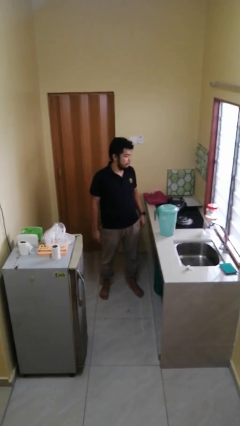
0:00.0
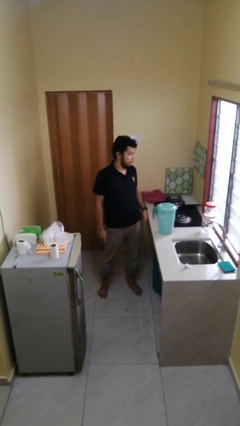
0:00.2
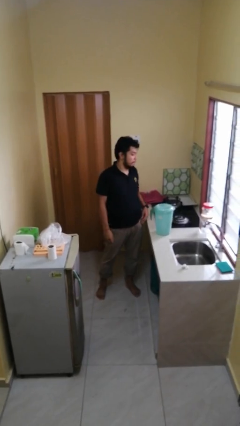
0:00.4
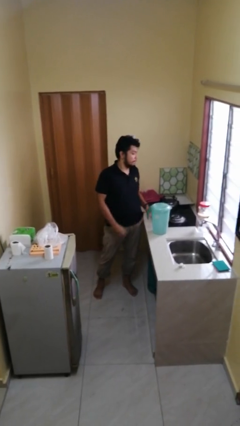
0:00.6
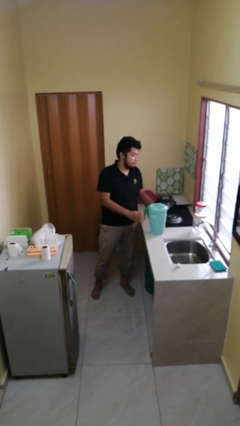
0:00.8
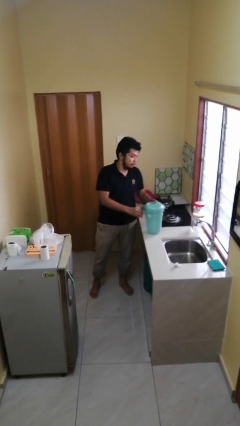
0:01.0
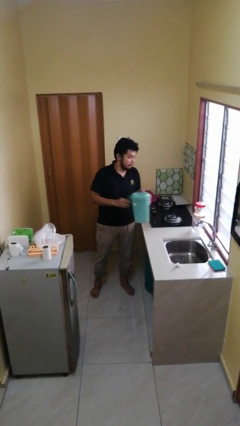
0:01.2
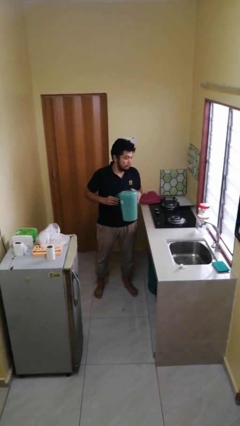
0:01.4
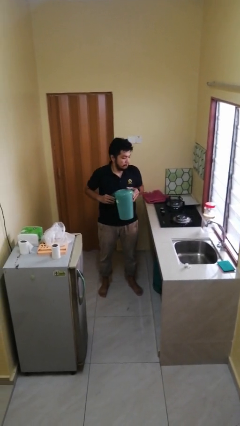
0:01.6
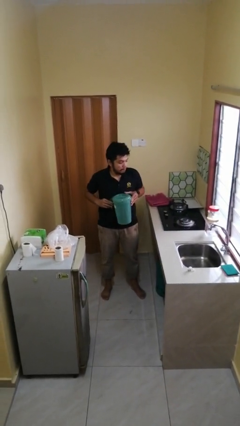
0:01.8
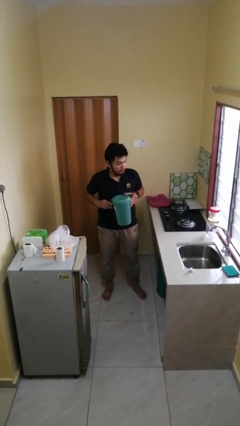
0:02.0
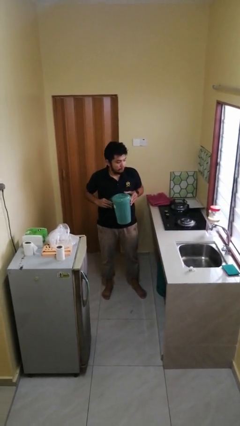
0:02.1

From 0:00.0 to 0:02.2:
person picks up object from countertop

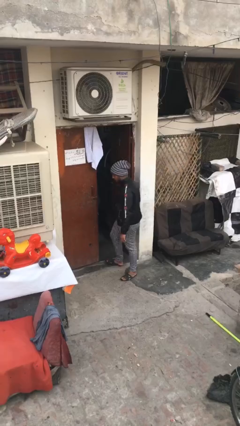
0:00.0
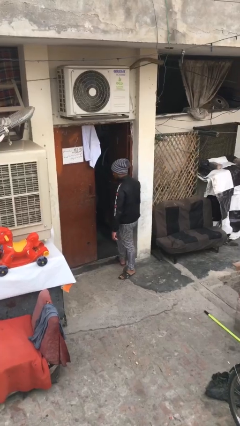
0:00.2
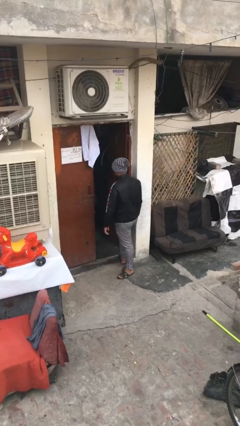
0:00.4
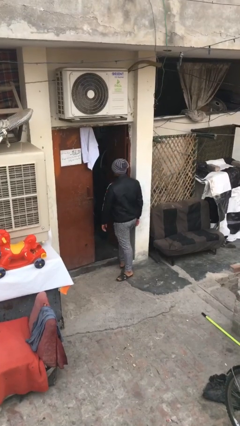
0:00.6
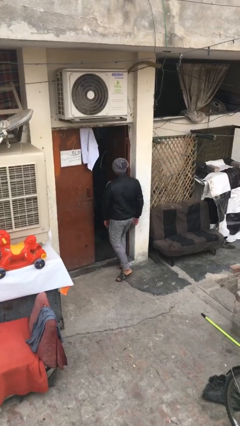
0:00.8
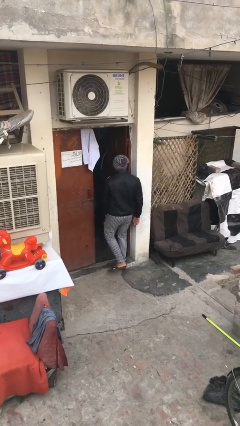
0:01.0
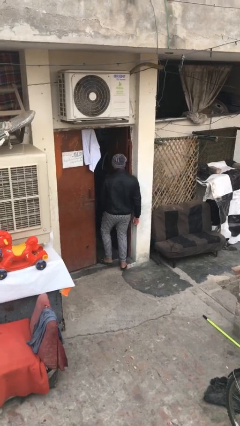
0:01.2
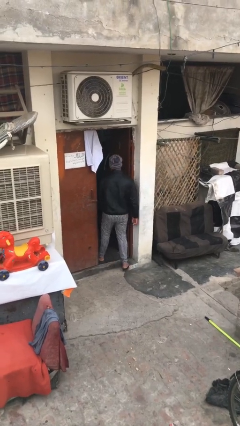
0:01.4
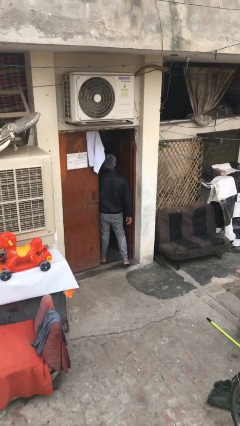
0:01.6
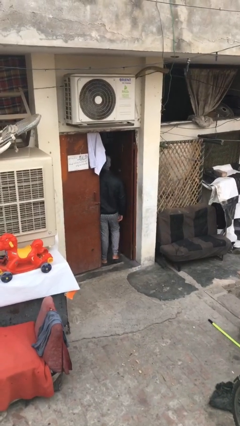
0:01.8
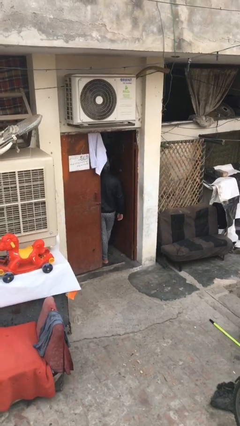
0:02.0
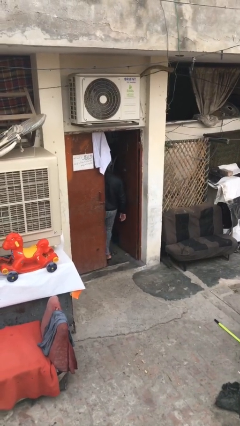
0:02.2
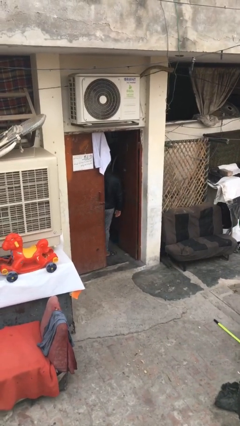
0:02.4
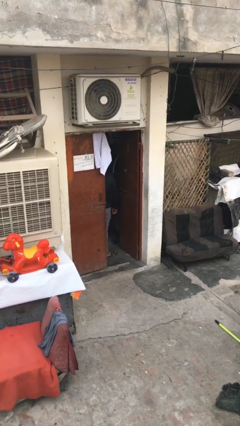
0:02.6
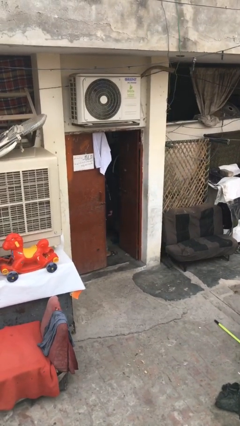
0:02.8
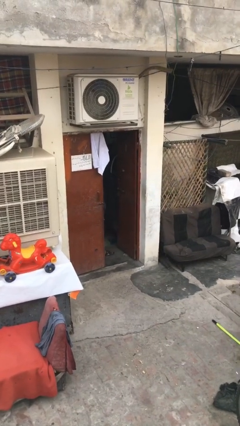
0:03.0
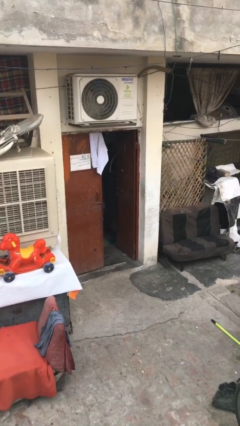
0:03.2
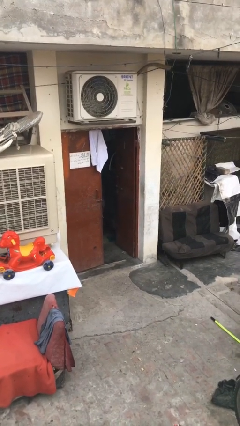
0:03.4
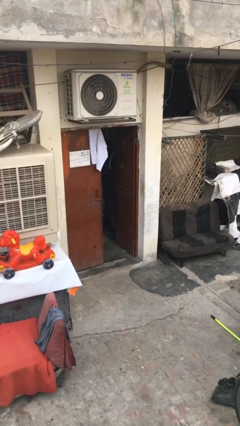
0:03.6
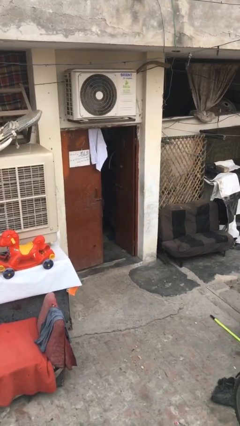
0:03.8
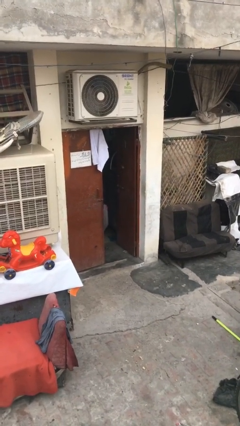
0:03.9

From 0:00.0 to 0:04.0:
person exits scene through structure

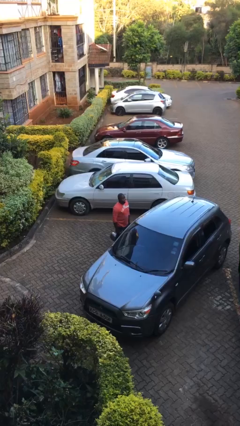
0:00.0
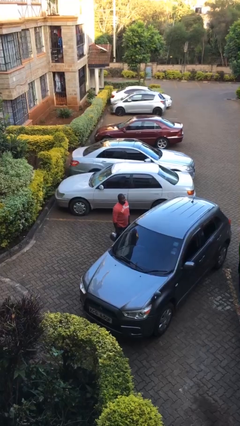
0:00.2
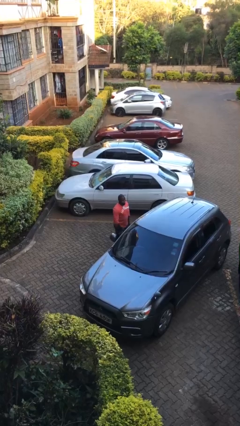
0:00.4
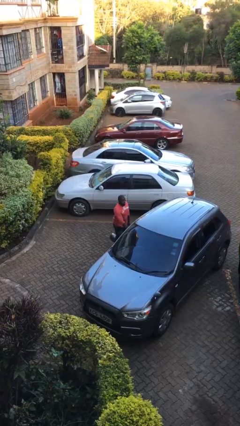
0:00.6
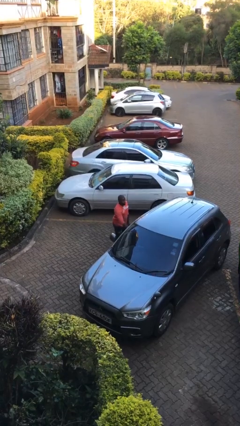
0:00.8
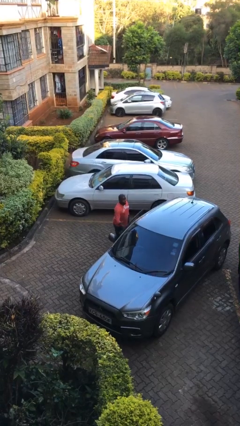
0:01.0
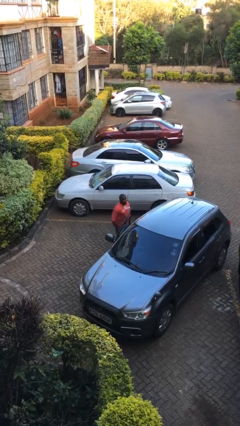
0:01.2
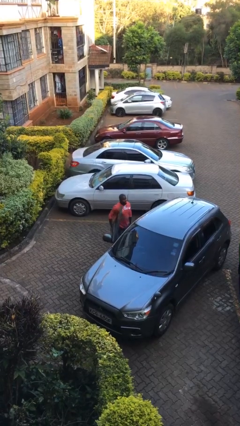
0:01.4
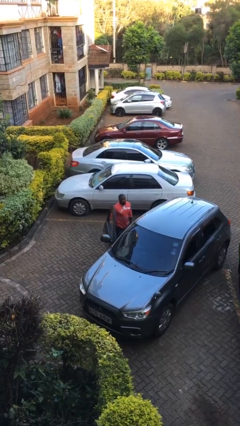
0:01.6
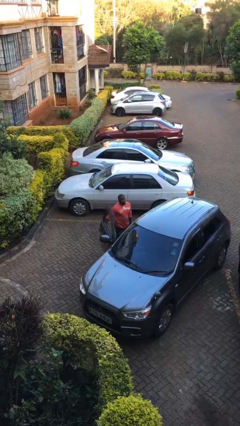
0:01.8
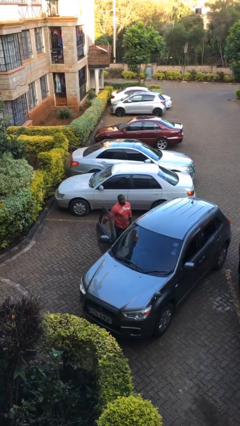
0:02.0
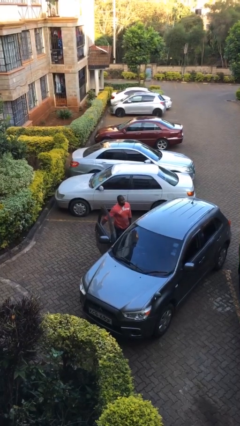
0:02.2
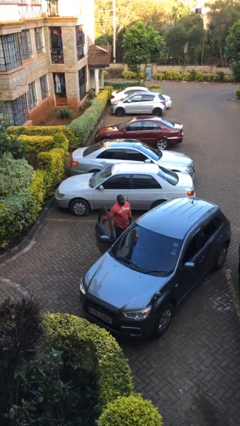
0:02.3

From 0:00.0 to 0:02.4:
person opens car door

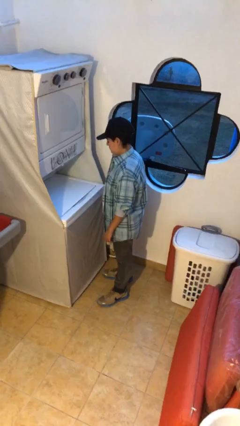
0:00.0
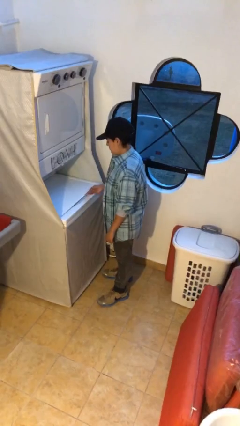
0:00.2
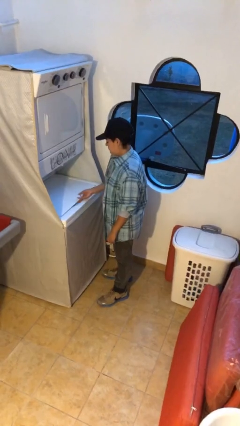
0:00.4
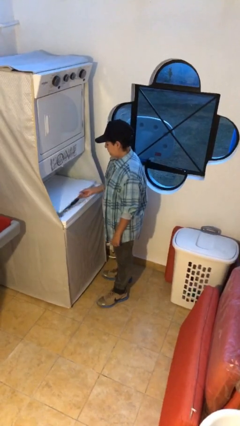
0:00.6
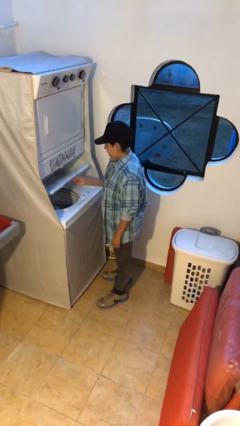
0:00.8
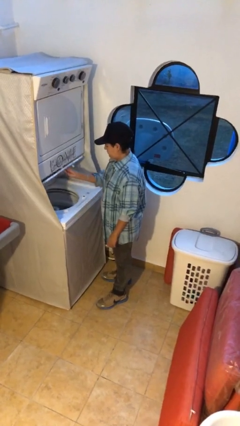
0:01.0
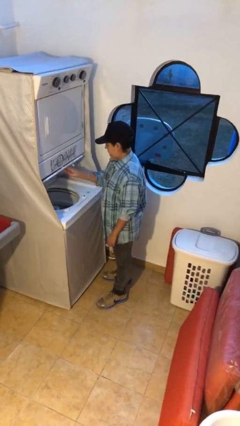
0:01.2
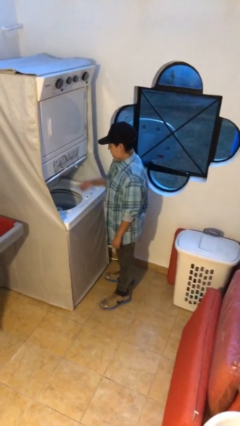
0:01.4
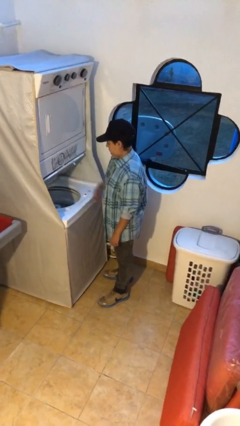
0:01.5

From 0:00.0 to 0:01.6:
person opens clothes washer

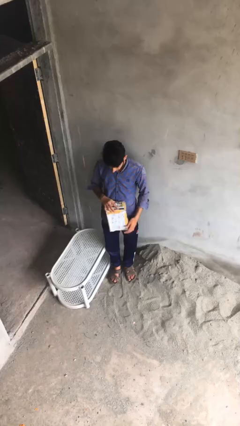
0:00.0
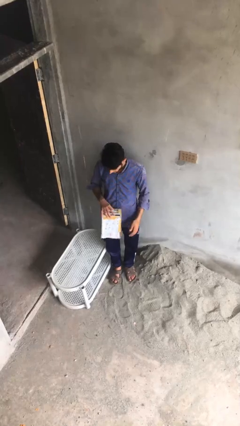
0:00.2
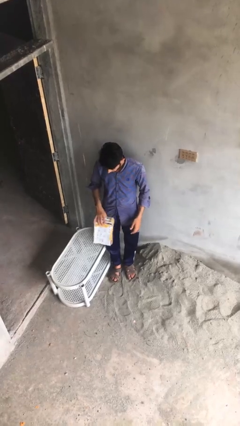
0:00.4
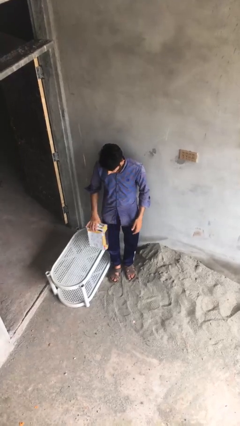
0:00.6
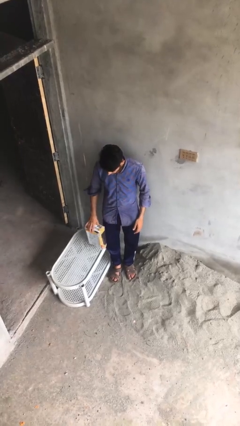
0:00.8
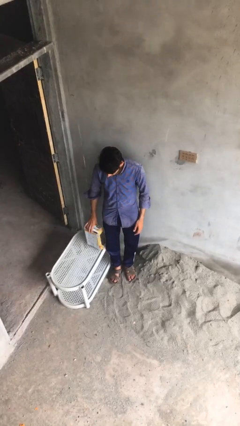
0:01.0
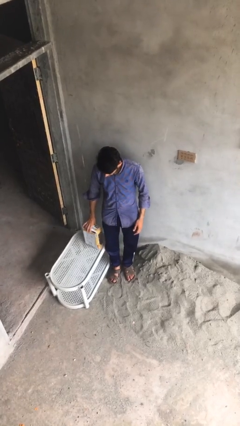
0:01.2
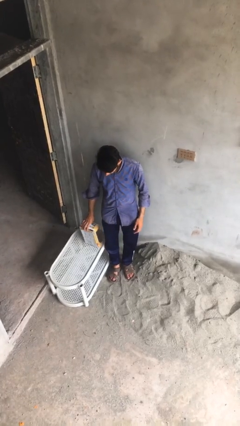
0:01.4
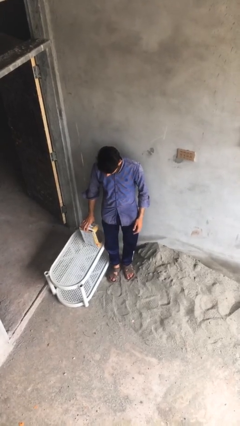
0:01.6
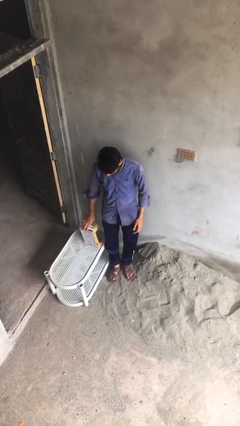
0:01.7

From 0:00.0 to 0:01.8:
person puts down object on table

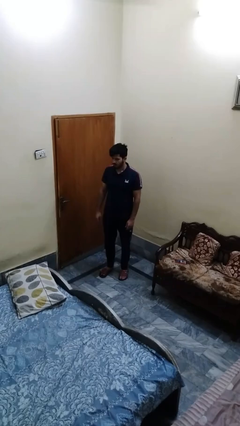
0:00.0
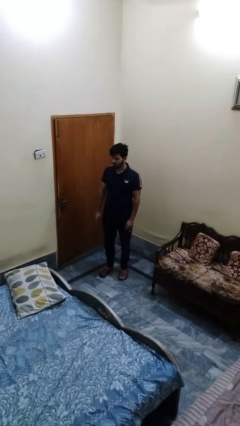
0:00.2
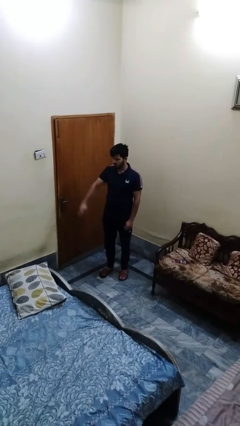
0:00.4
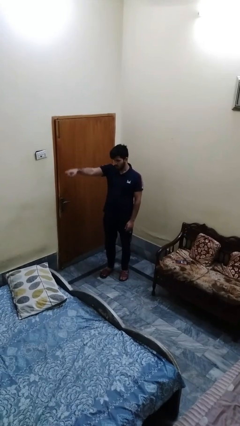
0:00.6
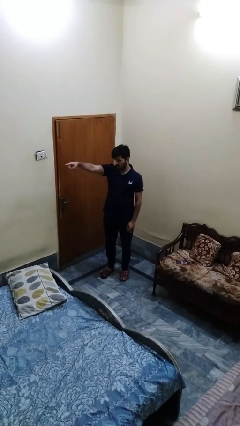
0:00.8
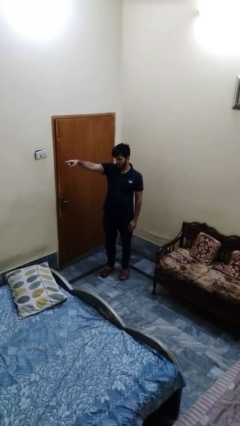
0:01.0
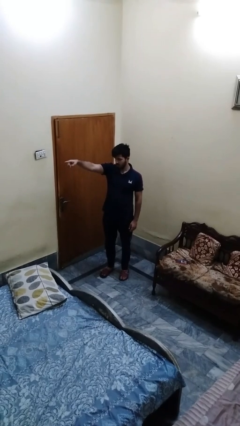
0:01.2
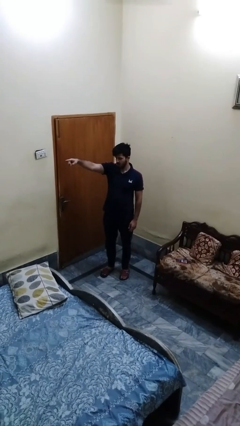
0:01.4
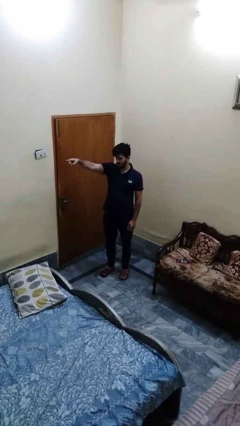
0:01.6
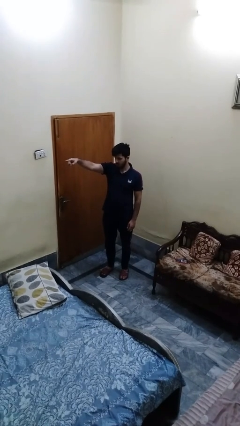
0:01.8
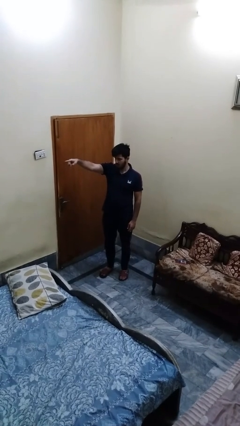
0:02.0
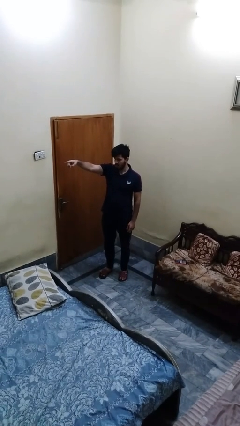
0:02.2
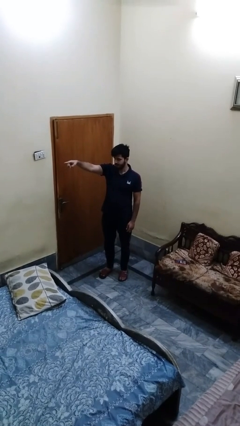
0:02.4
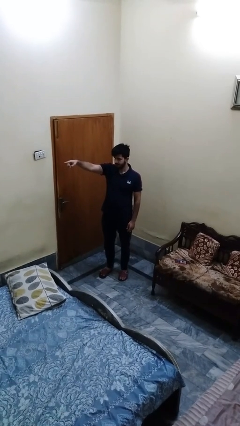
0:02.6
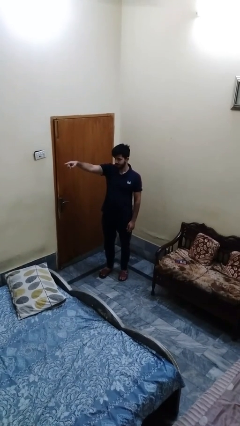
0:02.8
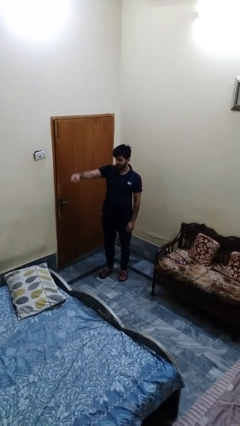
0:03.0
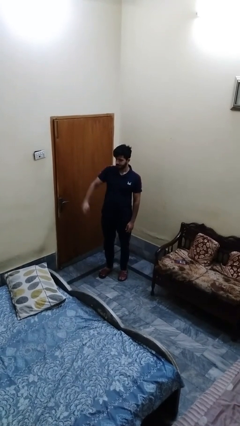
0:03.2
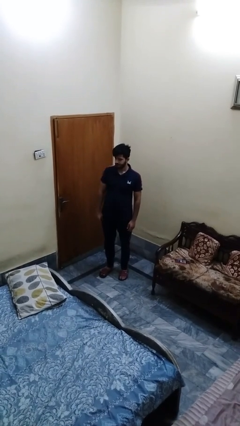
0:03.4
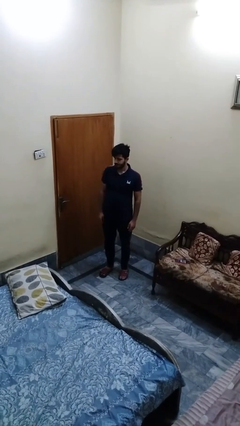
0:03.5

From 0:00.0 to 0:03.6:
person points at person

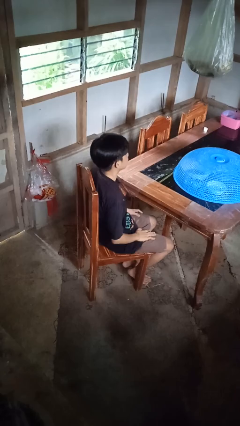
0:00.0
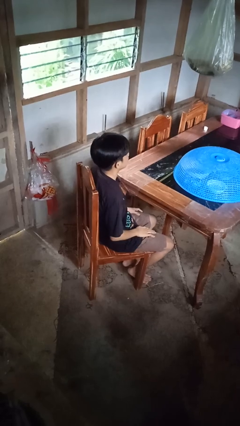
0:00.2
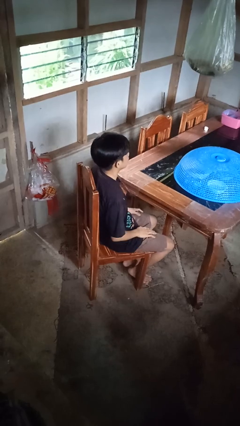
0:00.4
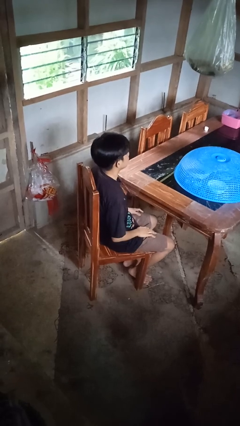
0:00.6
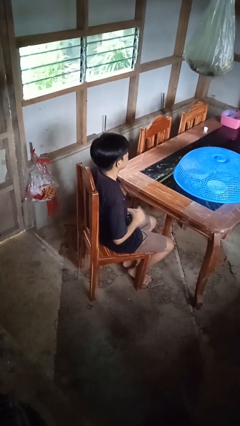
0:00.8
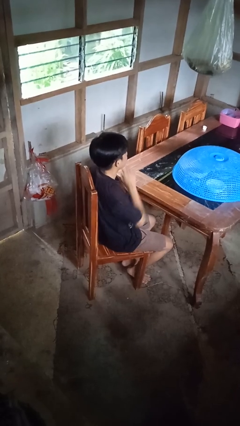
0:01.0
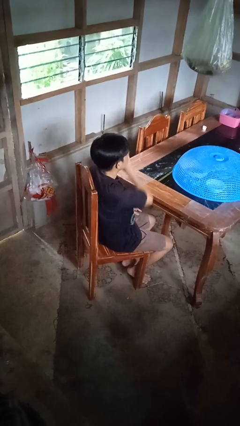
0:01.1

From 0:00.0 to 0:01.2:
person gestures swipe left

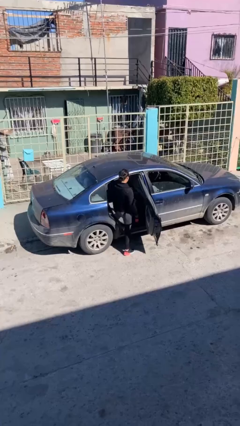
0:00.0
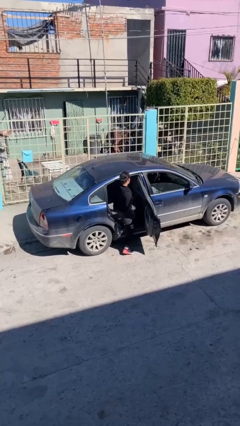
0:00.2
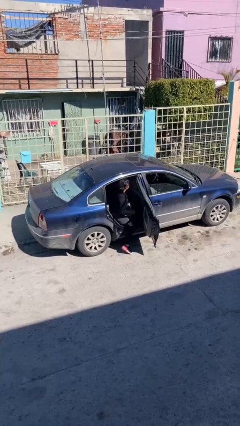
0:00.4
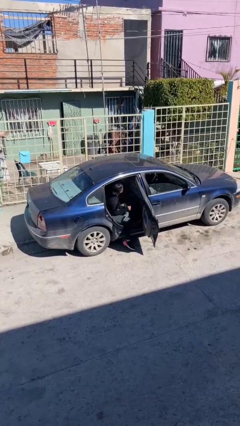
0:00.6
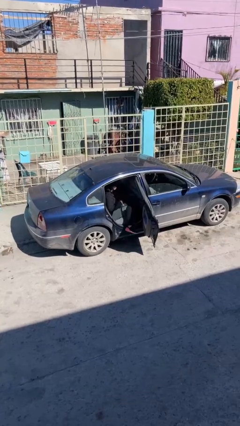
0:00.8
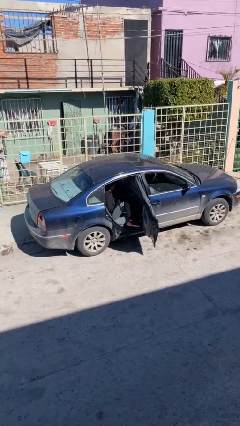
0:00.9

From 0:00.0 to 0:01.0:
person enters car
